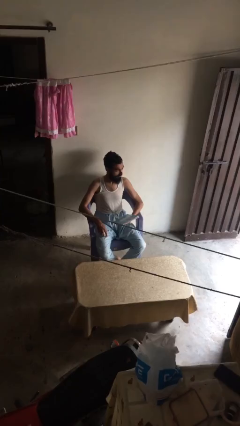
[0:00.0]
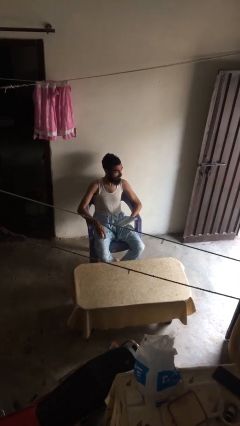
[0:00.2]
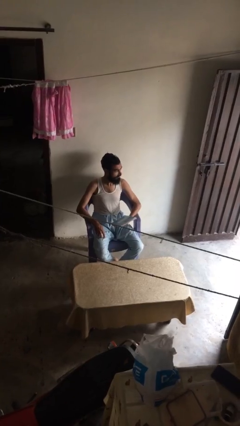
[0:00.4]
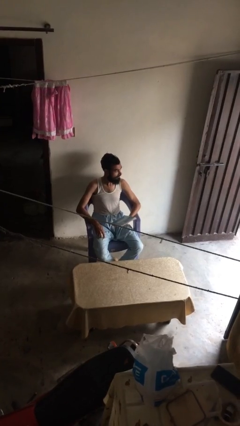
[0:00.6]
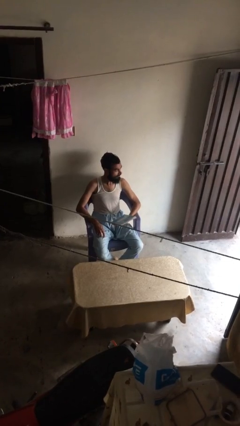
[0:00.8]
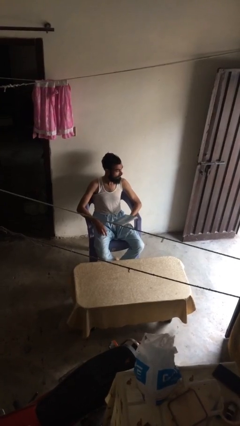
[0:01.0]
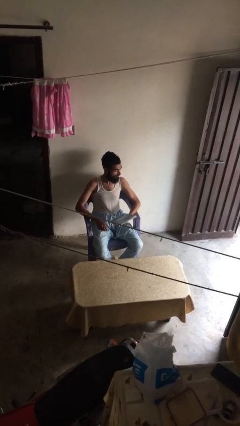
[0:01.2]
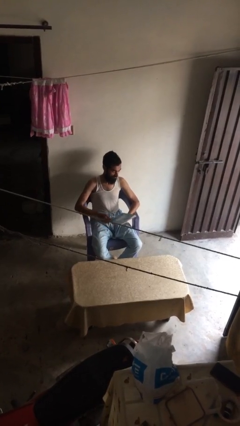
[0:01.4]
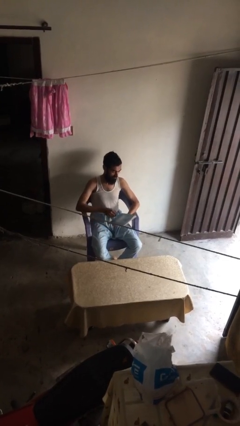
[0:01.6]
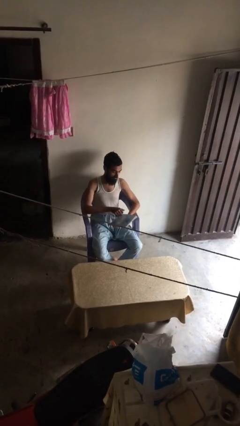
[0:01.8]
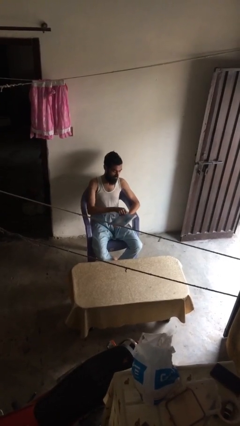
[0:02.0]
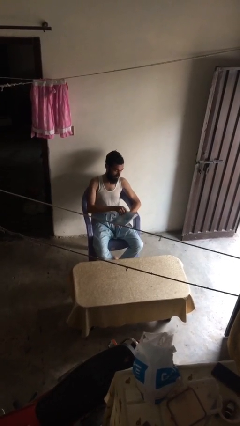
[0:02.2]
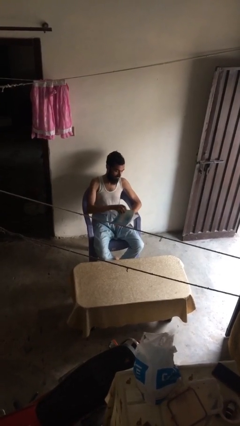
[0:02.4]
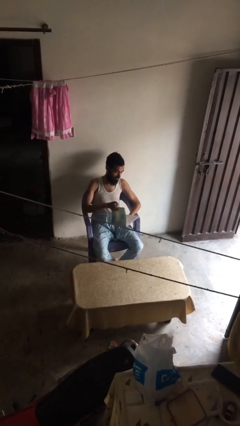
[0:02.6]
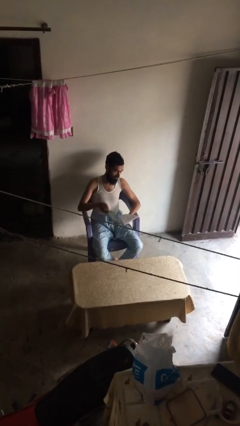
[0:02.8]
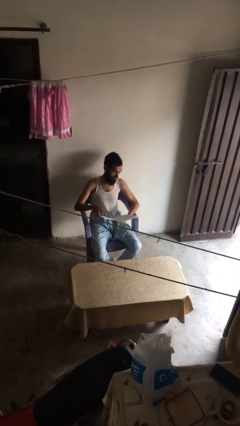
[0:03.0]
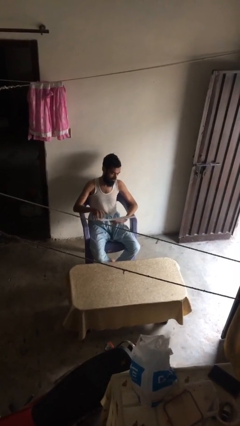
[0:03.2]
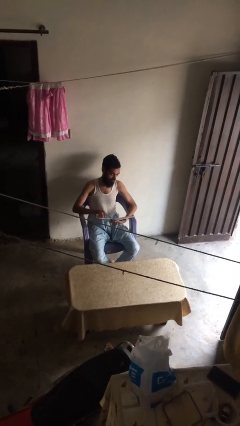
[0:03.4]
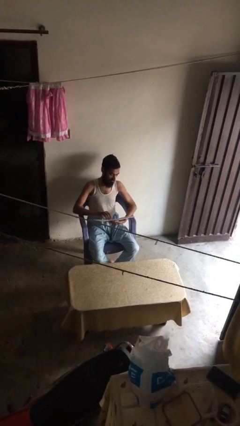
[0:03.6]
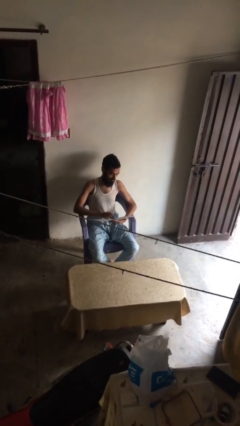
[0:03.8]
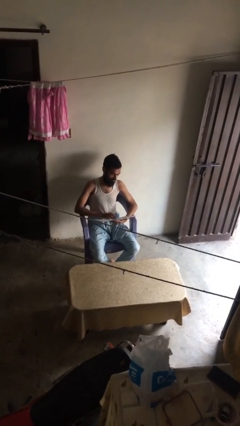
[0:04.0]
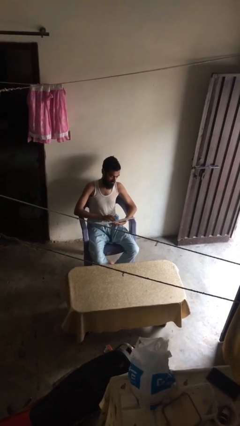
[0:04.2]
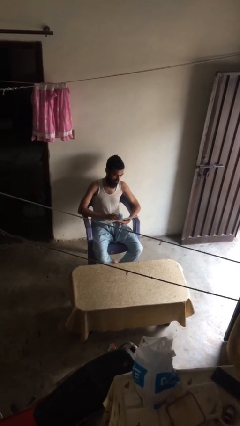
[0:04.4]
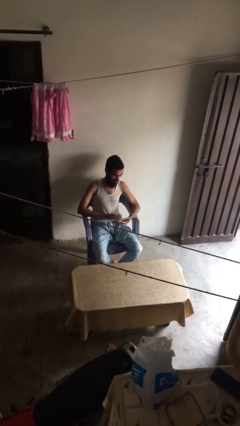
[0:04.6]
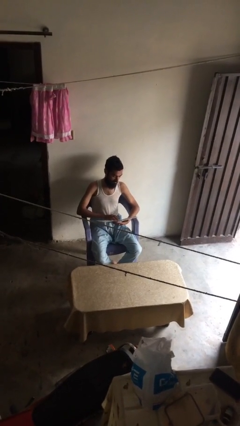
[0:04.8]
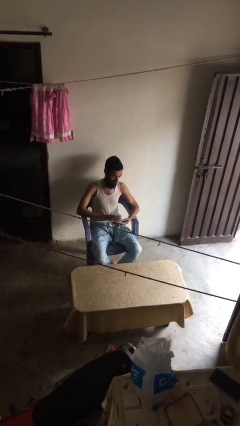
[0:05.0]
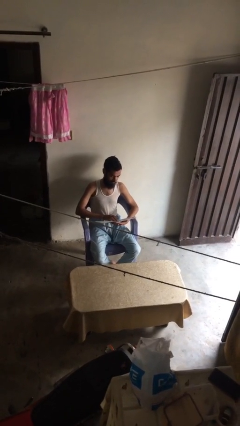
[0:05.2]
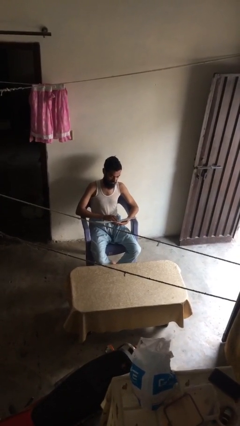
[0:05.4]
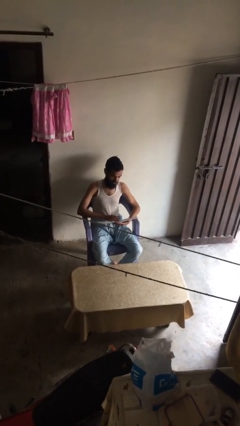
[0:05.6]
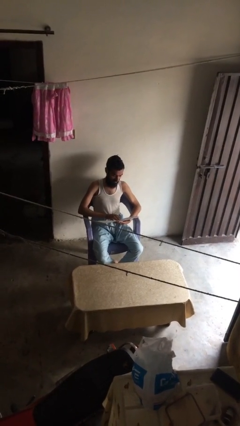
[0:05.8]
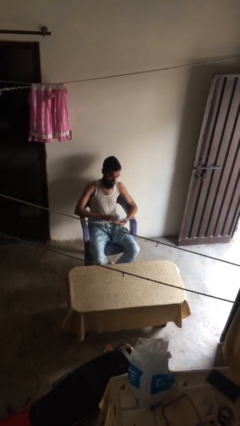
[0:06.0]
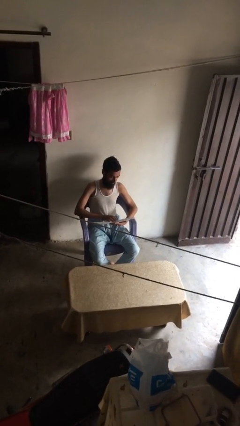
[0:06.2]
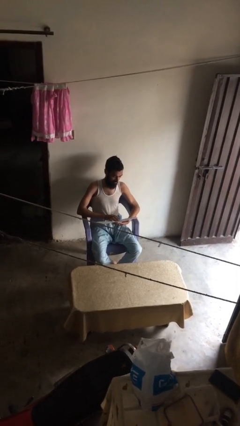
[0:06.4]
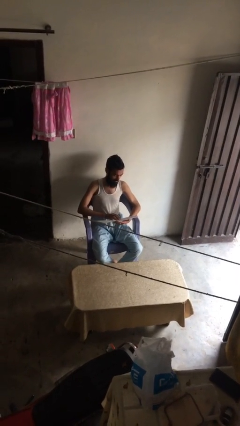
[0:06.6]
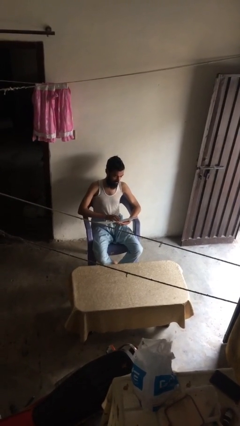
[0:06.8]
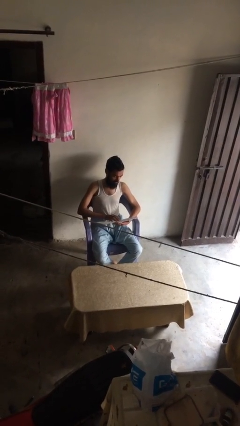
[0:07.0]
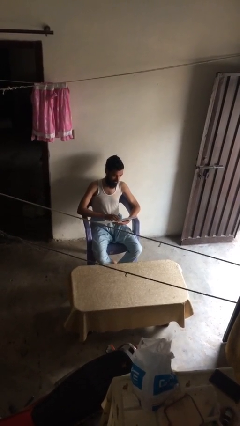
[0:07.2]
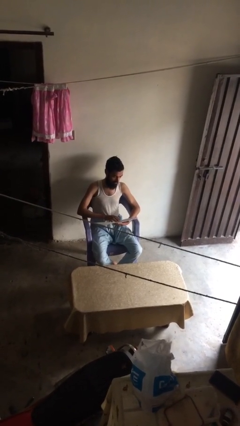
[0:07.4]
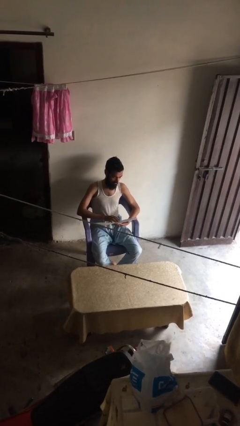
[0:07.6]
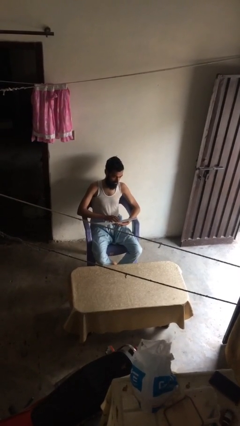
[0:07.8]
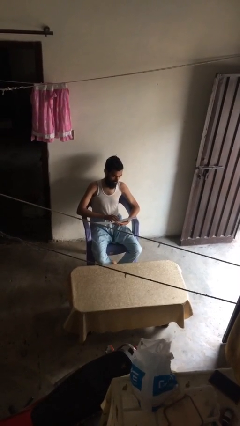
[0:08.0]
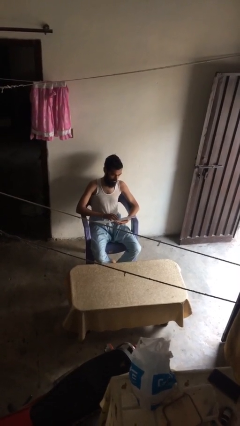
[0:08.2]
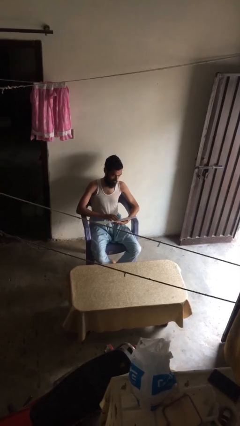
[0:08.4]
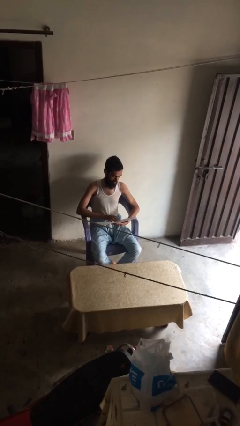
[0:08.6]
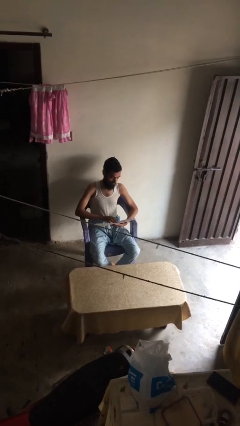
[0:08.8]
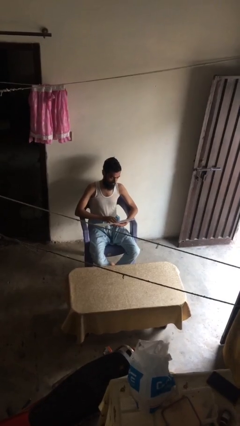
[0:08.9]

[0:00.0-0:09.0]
person reads document

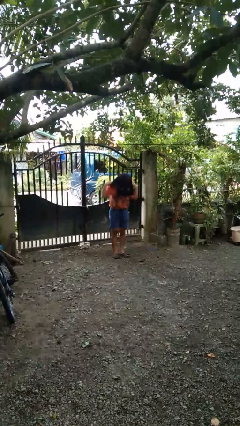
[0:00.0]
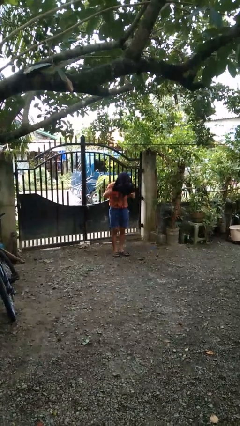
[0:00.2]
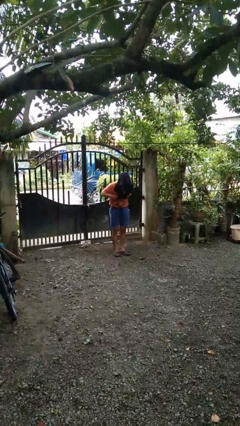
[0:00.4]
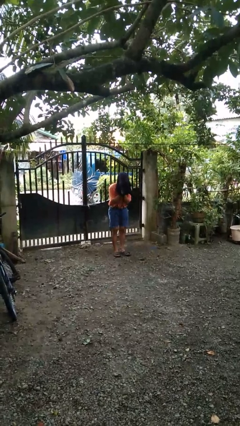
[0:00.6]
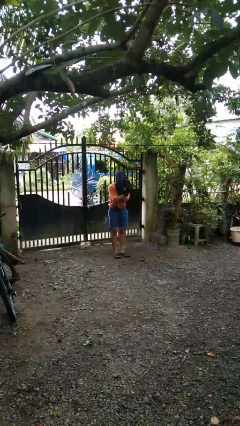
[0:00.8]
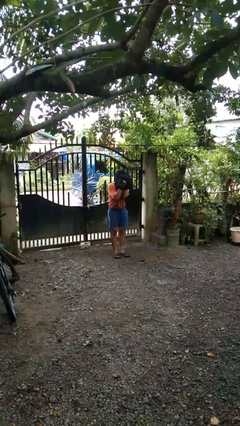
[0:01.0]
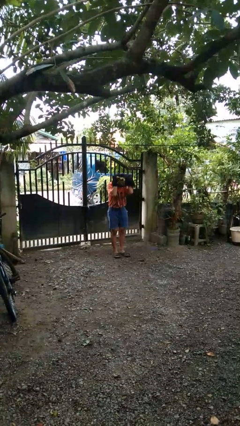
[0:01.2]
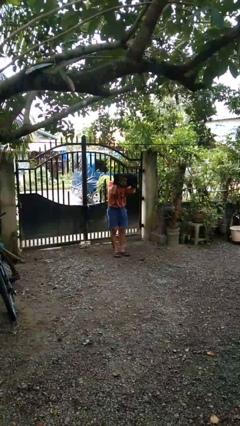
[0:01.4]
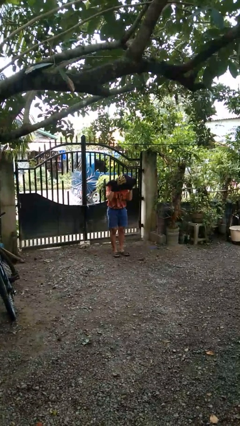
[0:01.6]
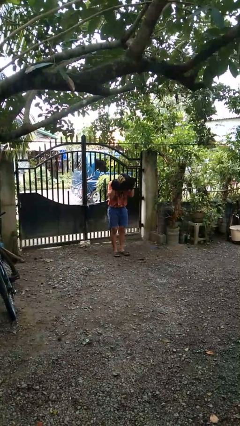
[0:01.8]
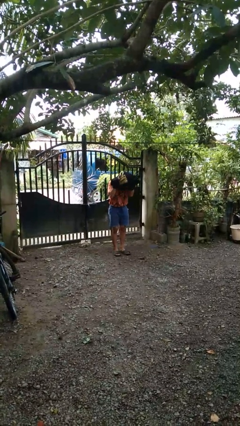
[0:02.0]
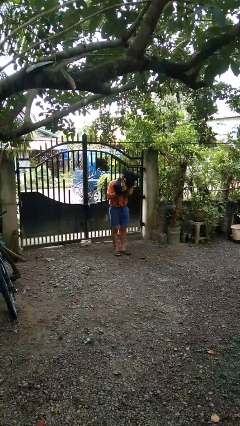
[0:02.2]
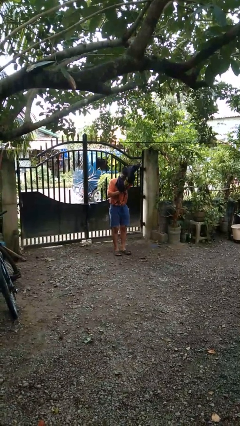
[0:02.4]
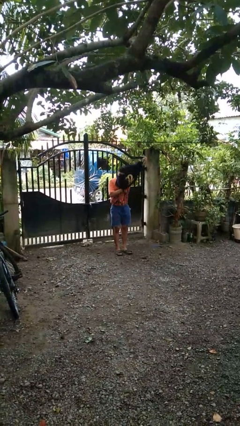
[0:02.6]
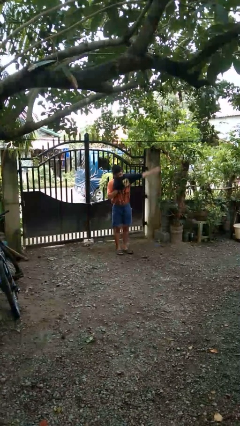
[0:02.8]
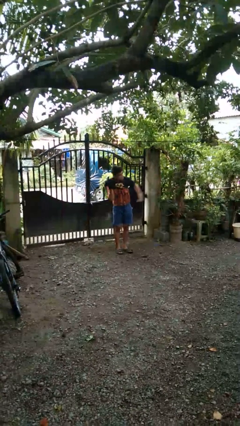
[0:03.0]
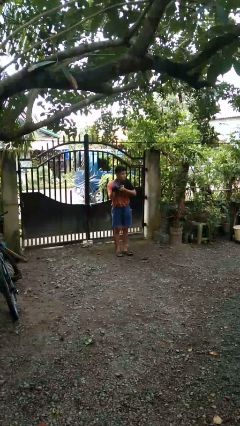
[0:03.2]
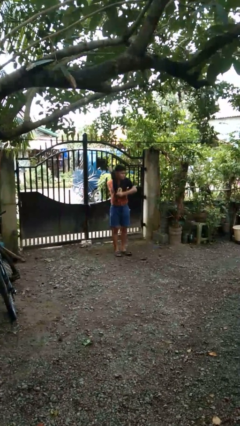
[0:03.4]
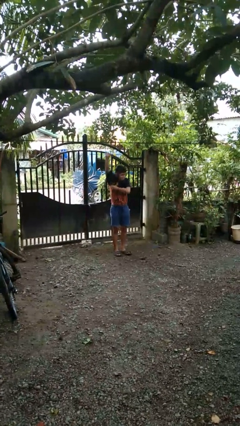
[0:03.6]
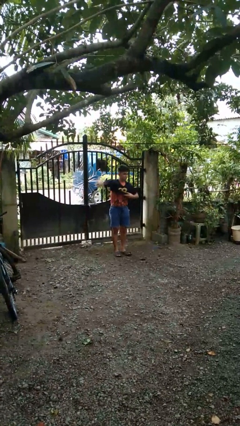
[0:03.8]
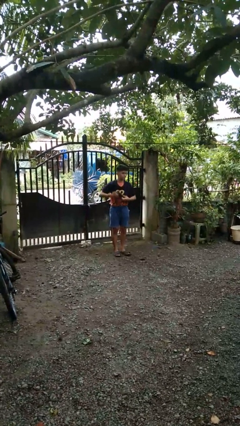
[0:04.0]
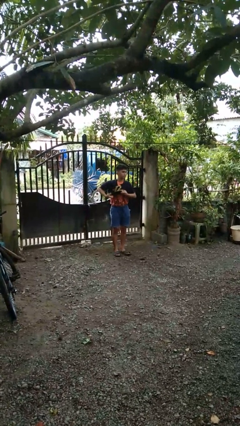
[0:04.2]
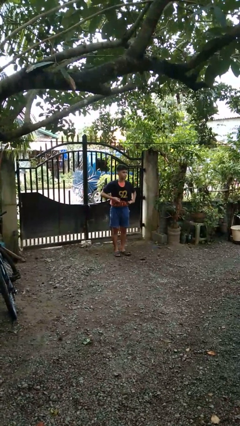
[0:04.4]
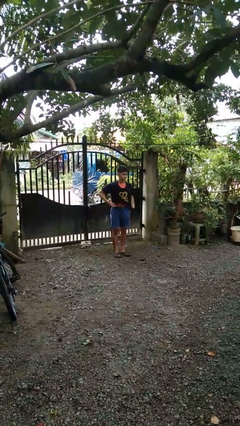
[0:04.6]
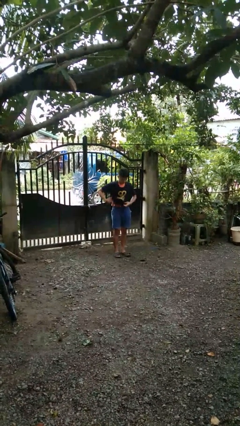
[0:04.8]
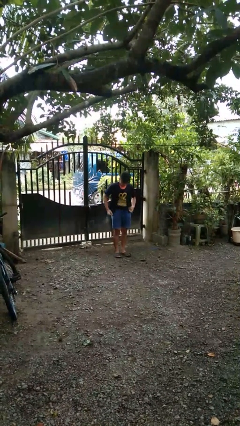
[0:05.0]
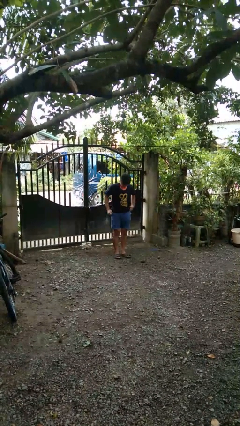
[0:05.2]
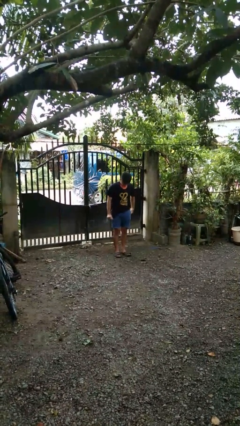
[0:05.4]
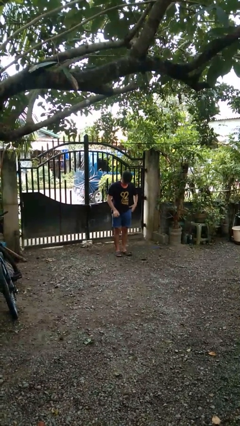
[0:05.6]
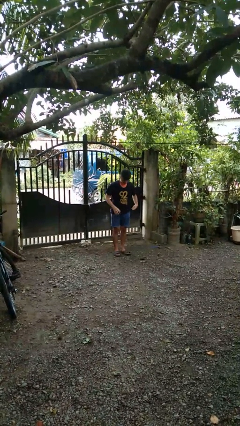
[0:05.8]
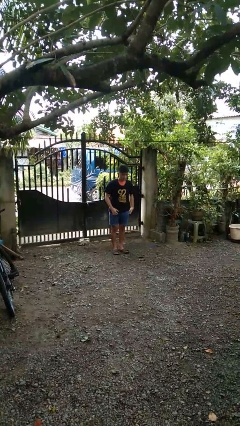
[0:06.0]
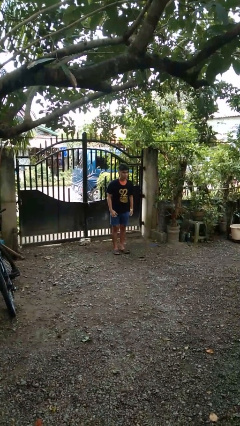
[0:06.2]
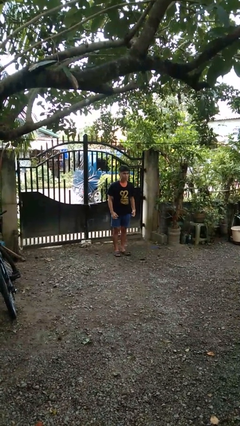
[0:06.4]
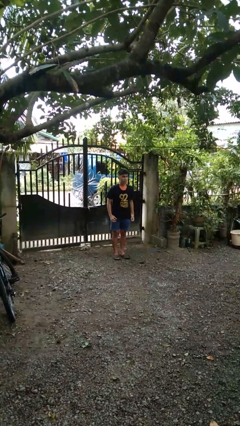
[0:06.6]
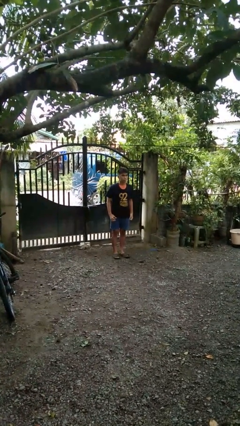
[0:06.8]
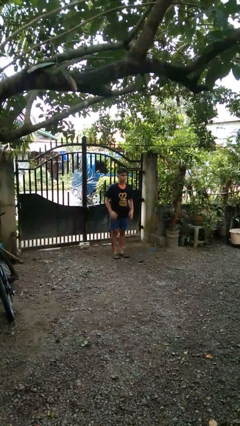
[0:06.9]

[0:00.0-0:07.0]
person puts on shirt

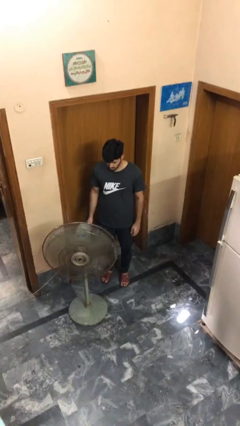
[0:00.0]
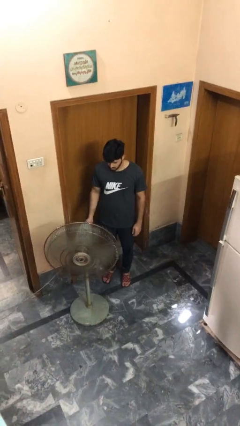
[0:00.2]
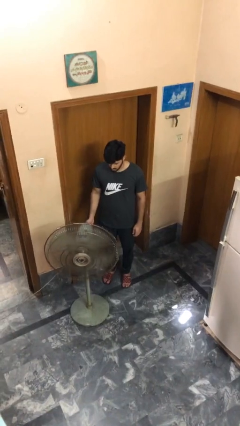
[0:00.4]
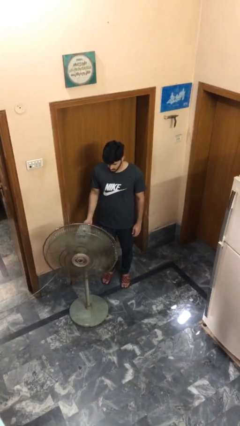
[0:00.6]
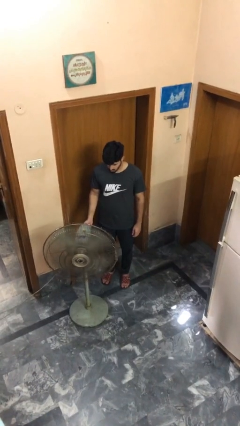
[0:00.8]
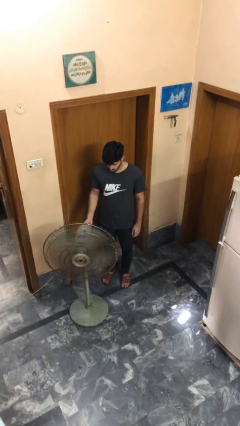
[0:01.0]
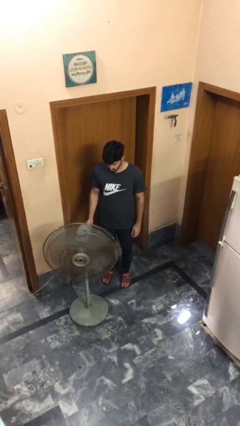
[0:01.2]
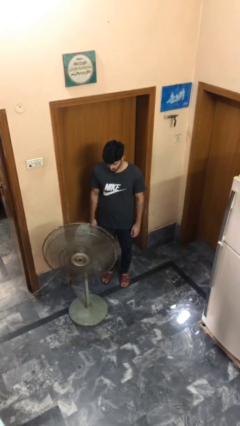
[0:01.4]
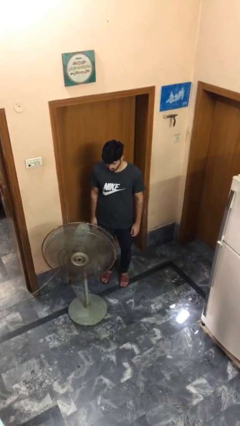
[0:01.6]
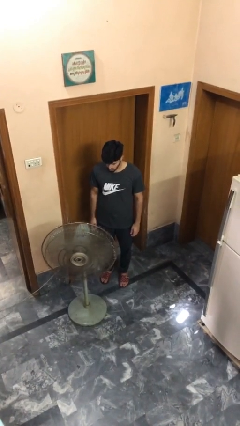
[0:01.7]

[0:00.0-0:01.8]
person turns on fan

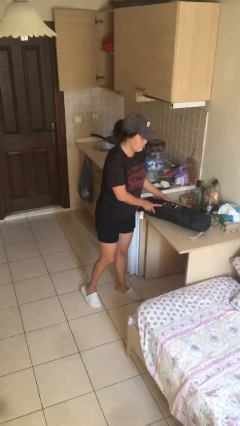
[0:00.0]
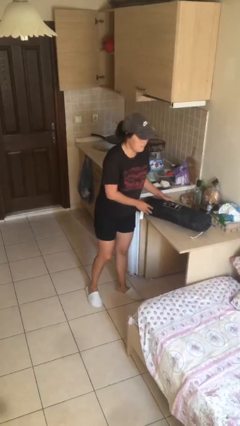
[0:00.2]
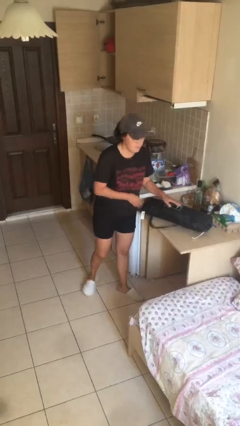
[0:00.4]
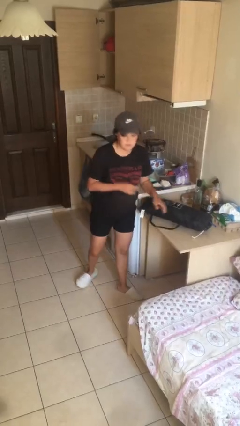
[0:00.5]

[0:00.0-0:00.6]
person puts down object on table
